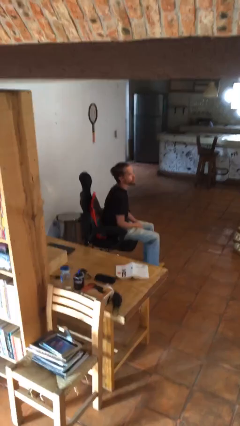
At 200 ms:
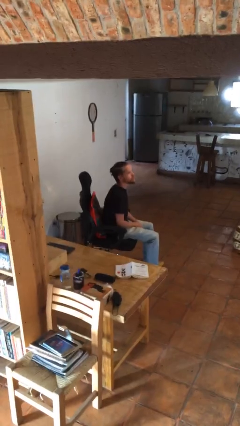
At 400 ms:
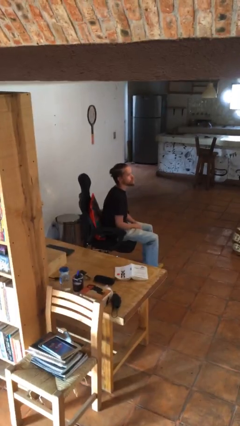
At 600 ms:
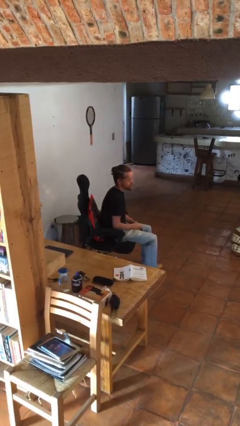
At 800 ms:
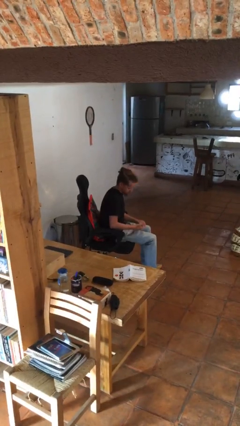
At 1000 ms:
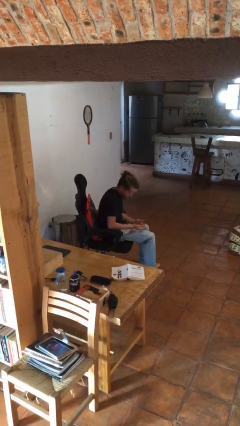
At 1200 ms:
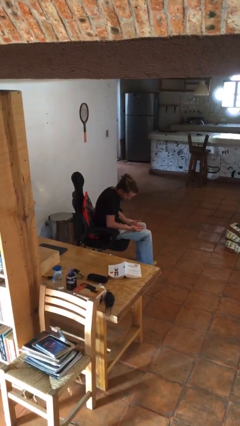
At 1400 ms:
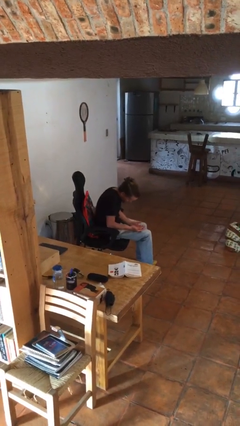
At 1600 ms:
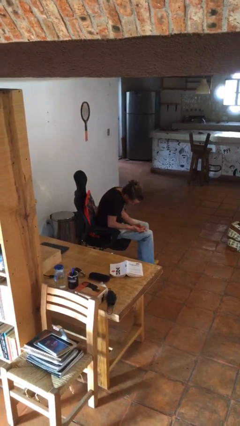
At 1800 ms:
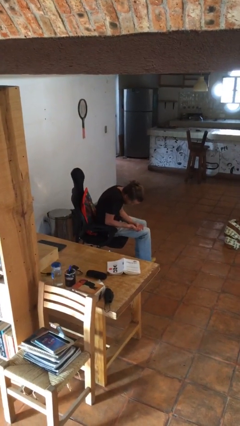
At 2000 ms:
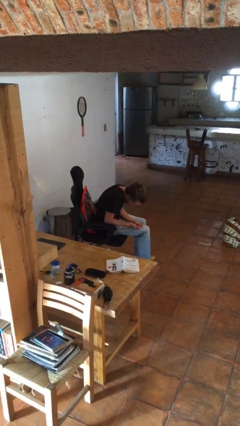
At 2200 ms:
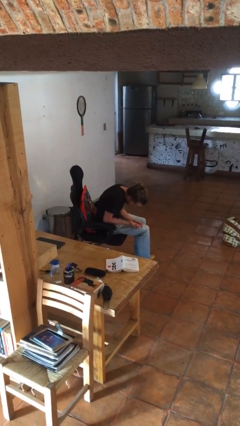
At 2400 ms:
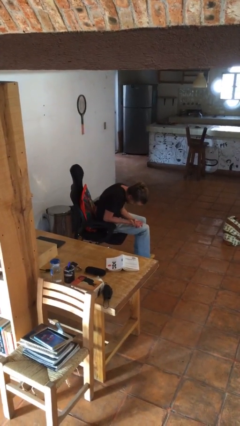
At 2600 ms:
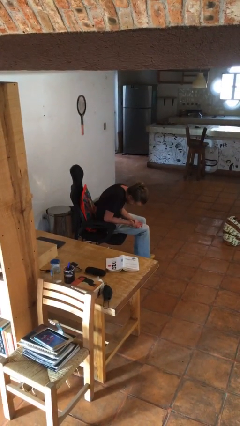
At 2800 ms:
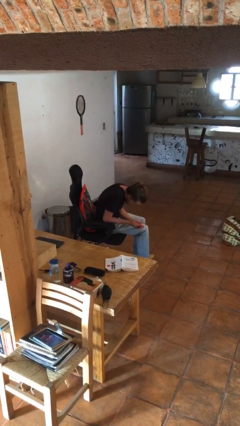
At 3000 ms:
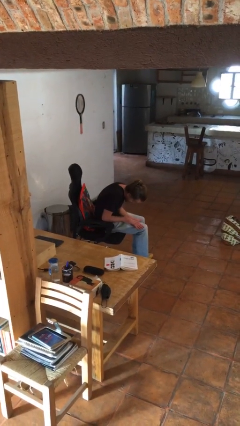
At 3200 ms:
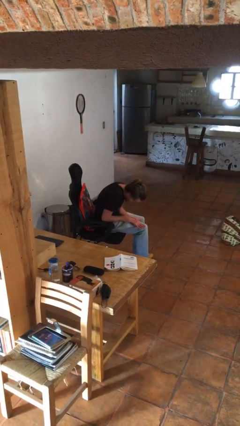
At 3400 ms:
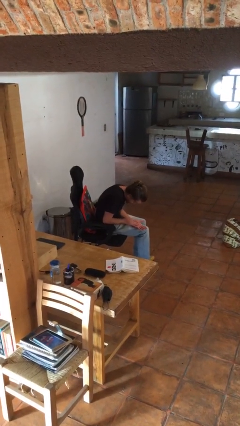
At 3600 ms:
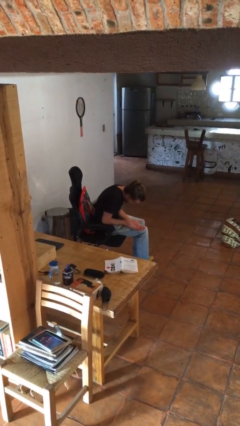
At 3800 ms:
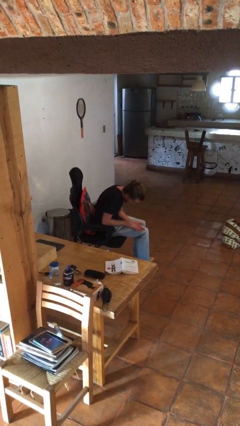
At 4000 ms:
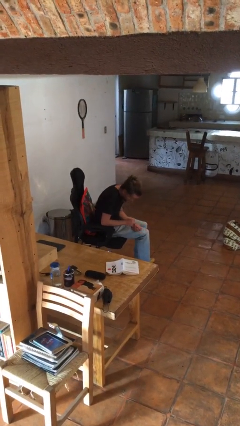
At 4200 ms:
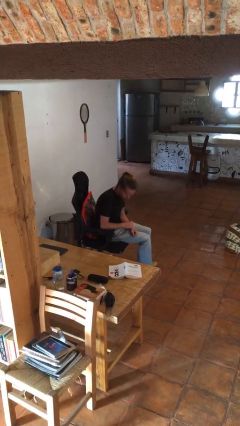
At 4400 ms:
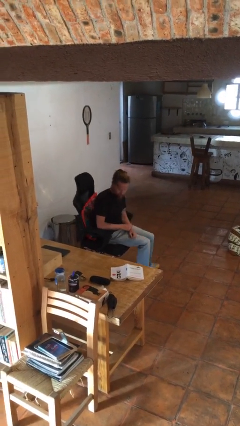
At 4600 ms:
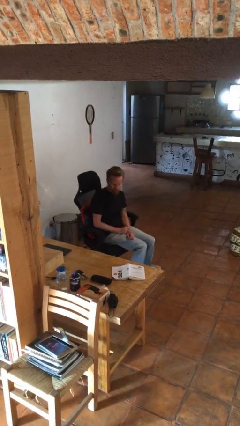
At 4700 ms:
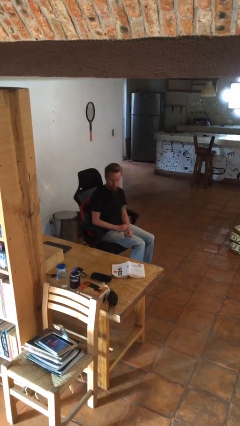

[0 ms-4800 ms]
person looks at hands in lap

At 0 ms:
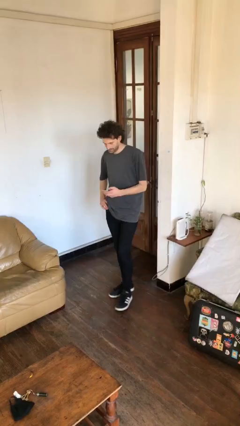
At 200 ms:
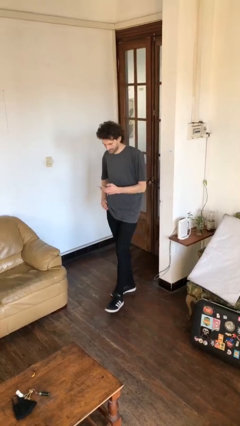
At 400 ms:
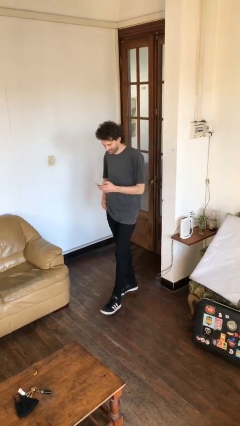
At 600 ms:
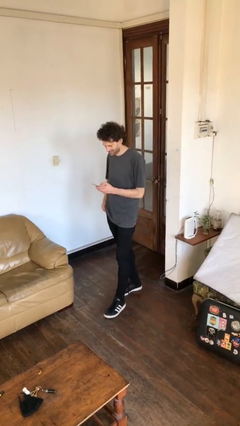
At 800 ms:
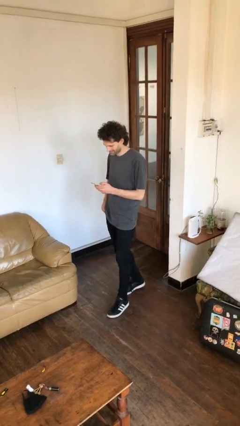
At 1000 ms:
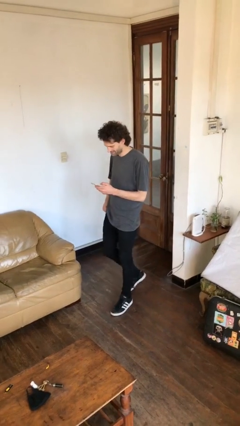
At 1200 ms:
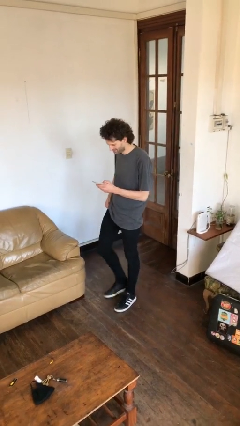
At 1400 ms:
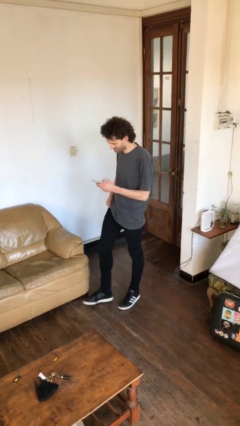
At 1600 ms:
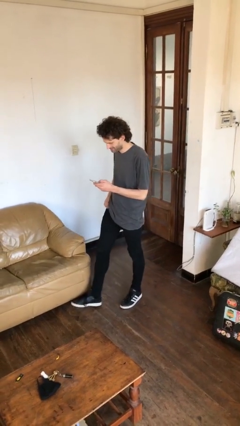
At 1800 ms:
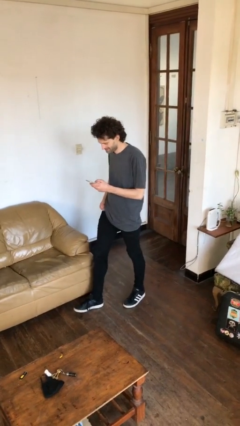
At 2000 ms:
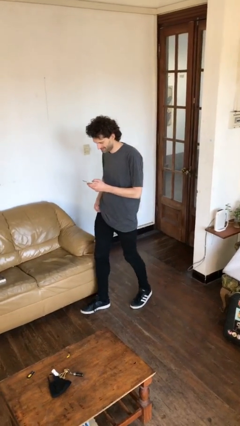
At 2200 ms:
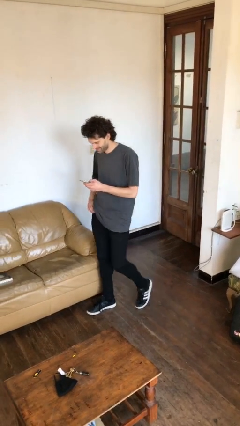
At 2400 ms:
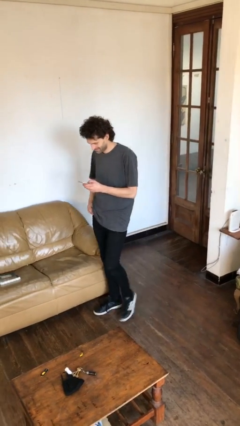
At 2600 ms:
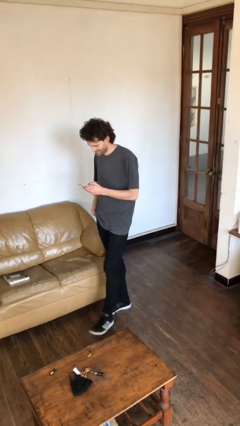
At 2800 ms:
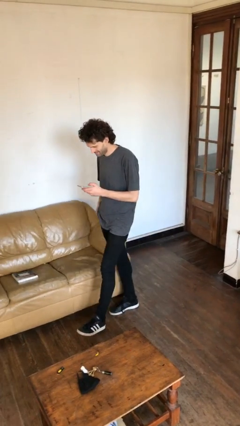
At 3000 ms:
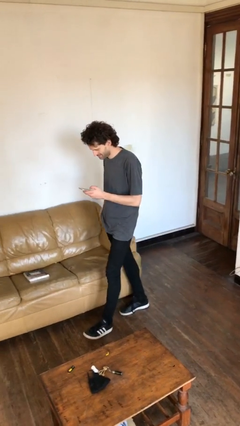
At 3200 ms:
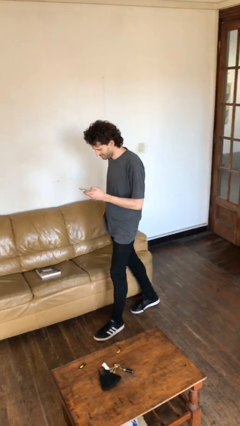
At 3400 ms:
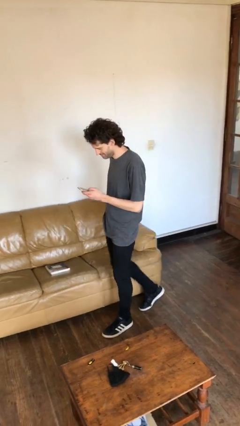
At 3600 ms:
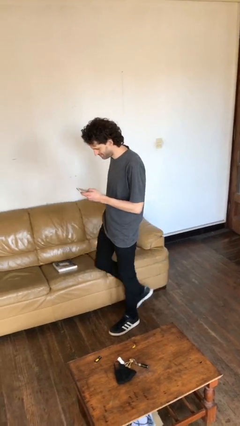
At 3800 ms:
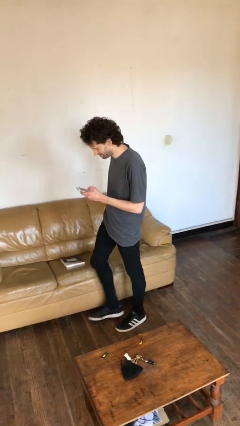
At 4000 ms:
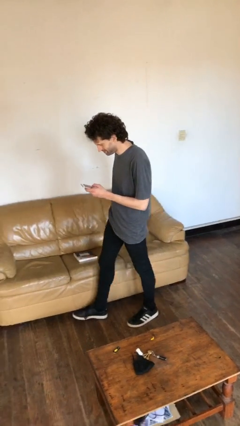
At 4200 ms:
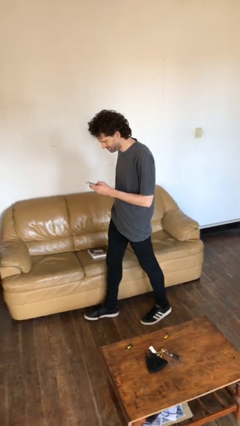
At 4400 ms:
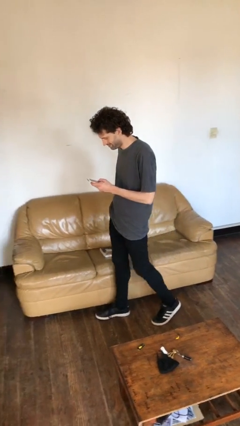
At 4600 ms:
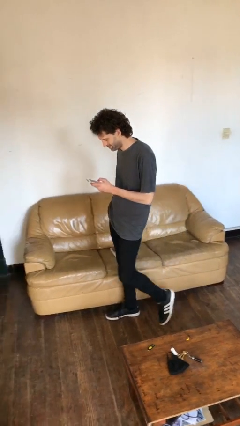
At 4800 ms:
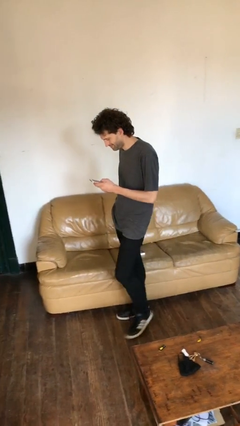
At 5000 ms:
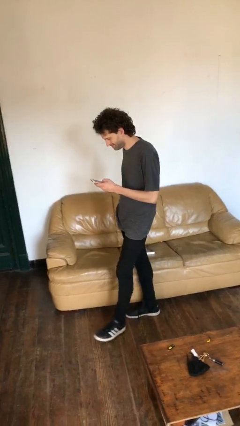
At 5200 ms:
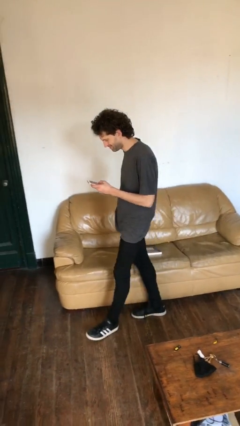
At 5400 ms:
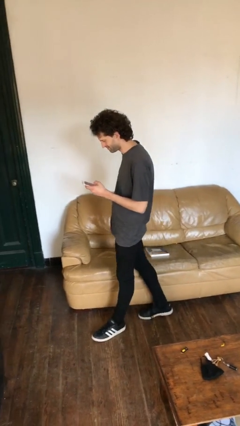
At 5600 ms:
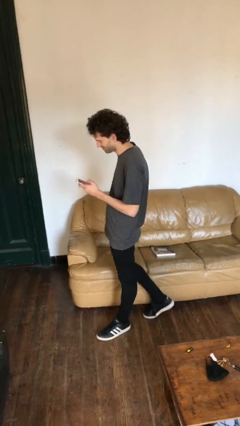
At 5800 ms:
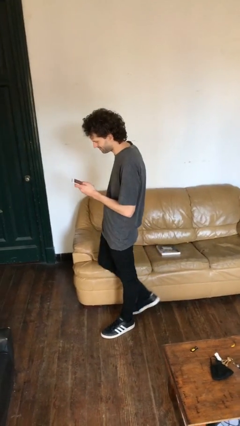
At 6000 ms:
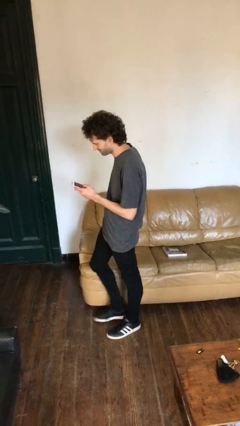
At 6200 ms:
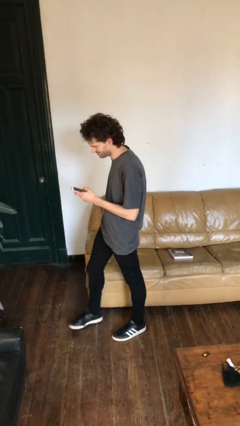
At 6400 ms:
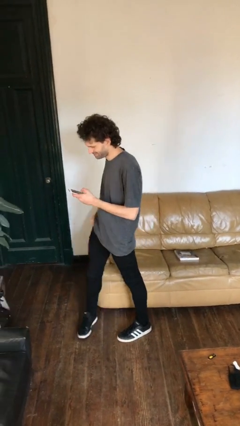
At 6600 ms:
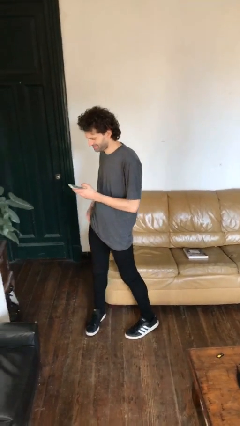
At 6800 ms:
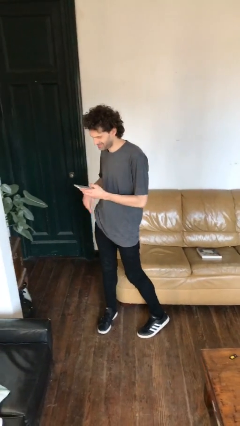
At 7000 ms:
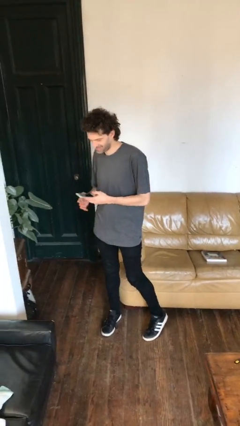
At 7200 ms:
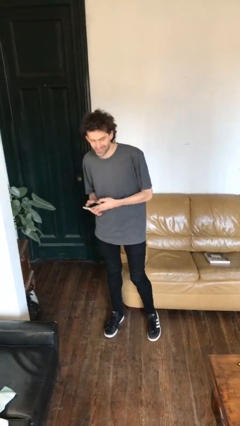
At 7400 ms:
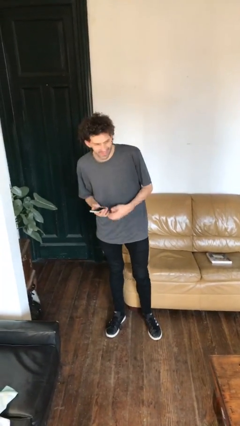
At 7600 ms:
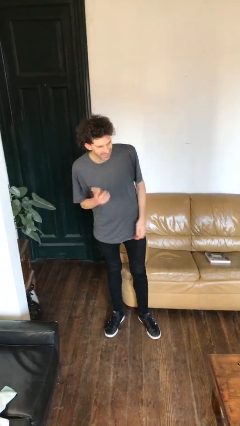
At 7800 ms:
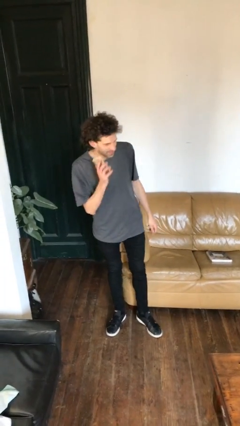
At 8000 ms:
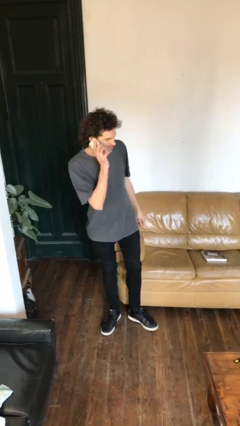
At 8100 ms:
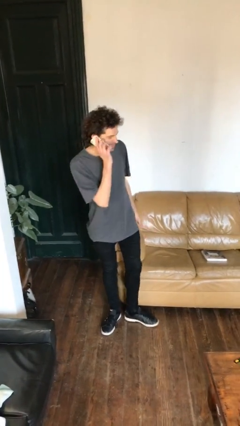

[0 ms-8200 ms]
person texts on phone

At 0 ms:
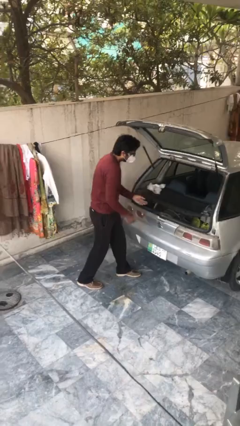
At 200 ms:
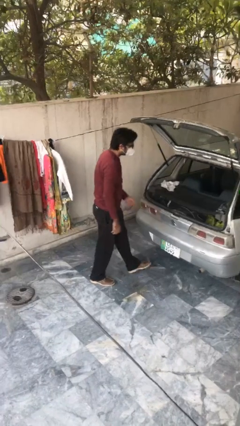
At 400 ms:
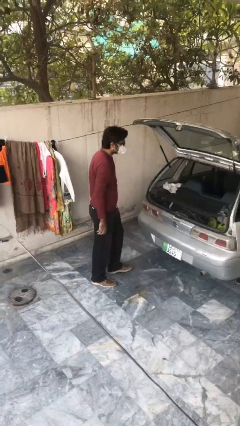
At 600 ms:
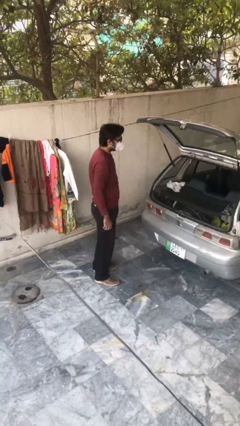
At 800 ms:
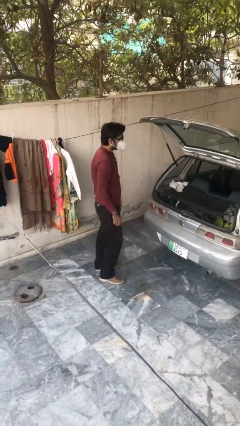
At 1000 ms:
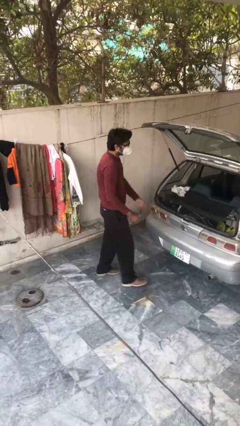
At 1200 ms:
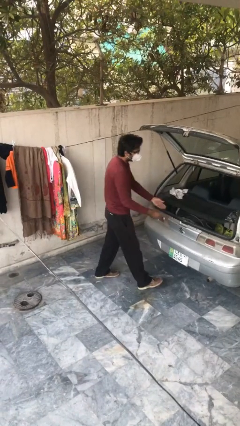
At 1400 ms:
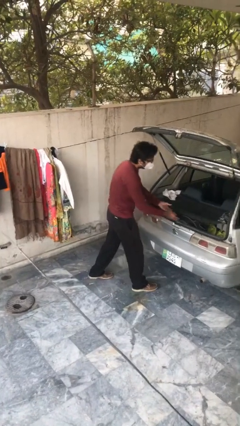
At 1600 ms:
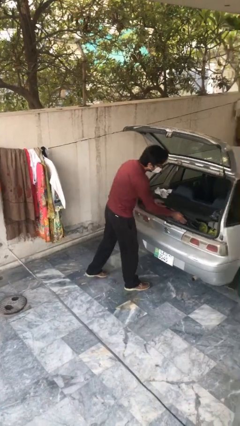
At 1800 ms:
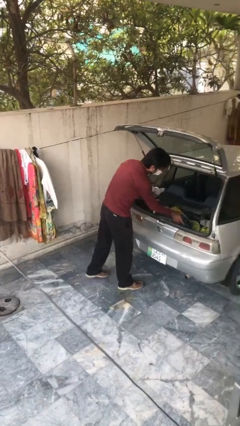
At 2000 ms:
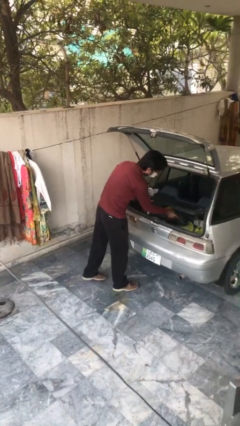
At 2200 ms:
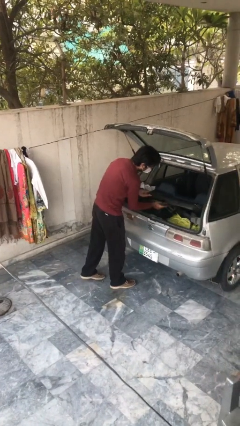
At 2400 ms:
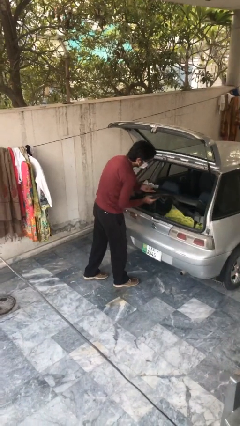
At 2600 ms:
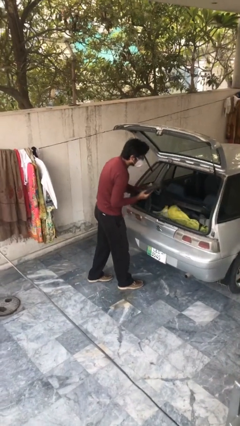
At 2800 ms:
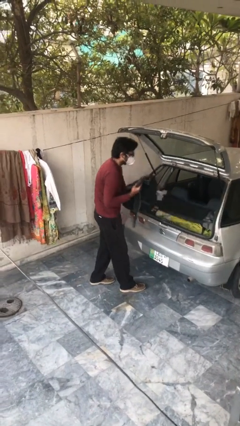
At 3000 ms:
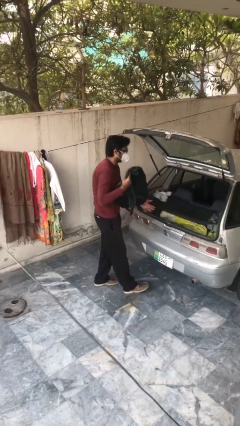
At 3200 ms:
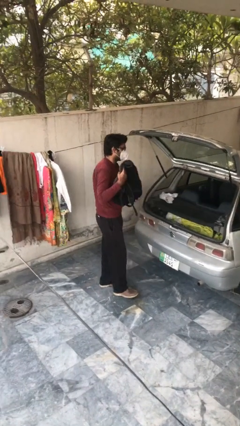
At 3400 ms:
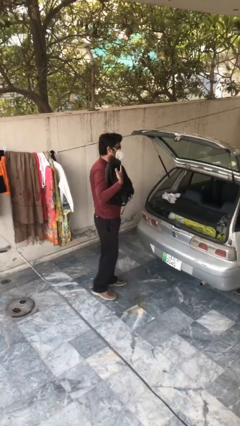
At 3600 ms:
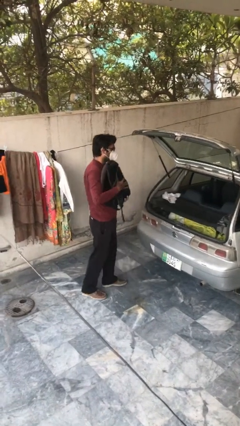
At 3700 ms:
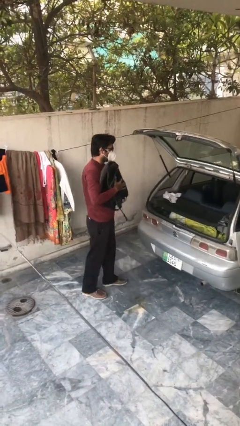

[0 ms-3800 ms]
person unloads car

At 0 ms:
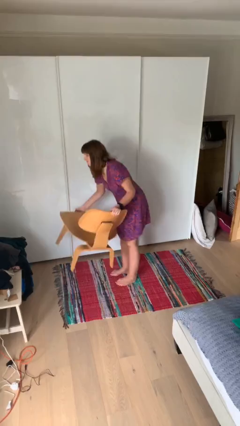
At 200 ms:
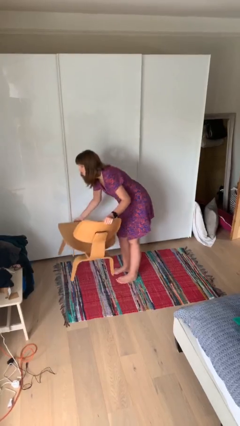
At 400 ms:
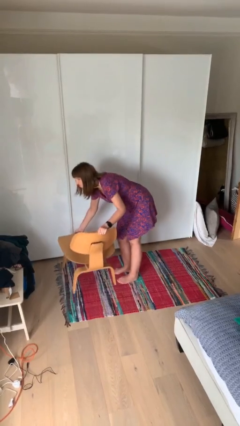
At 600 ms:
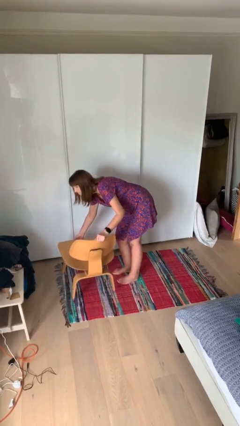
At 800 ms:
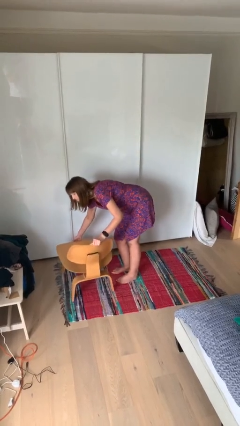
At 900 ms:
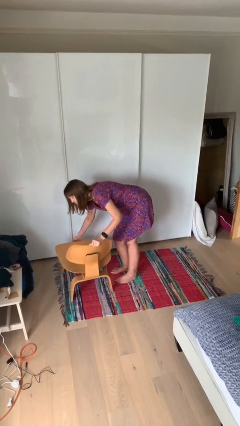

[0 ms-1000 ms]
person puts down object on floor
